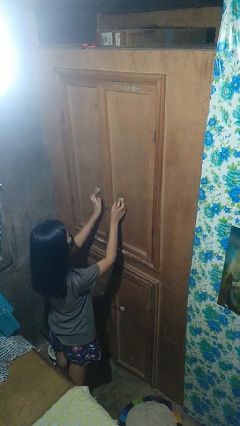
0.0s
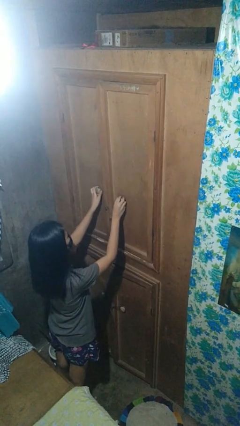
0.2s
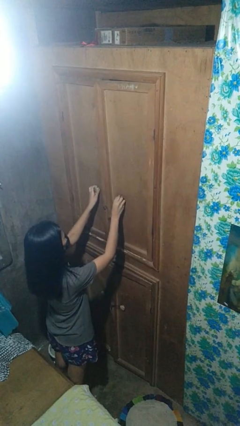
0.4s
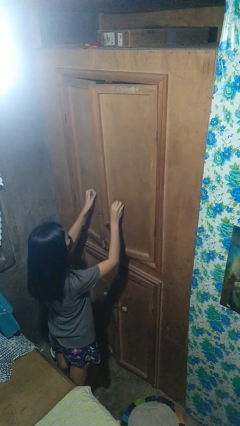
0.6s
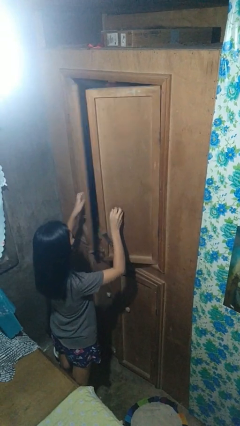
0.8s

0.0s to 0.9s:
person opens closet door

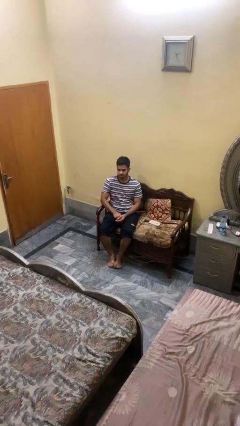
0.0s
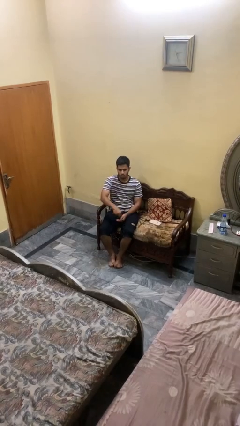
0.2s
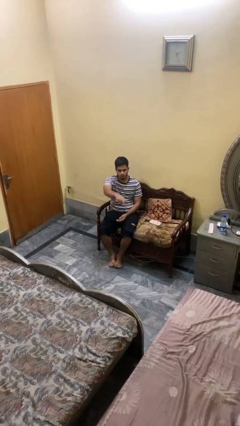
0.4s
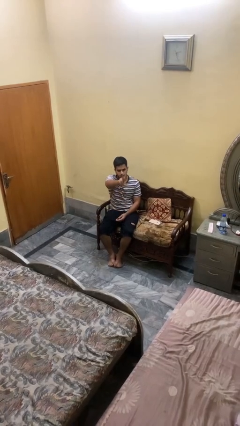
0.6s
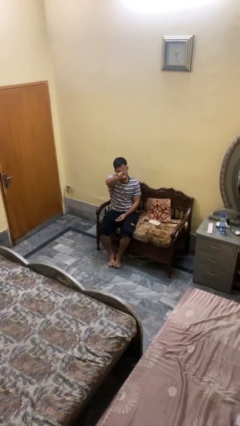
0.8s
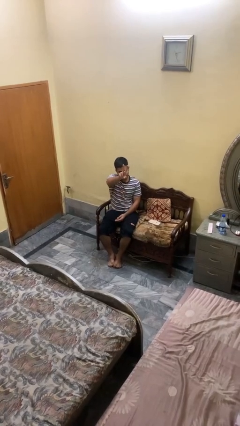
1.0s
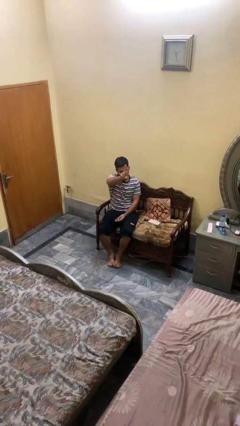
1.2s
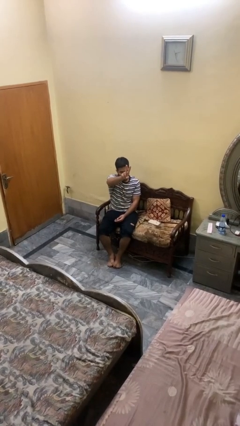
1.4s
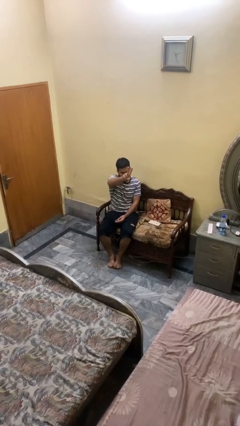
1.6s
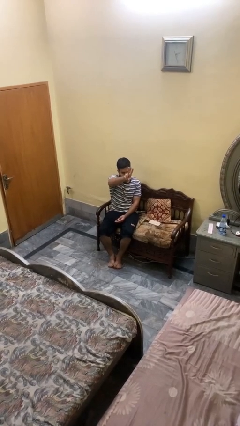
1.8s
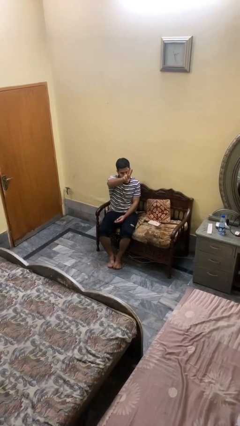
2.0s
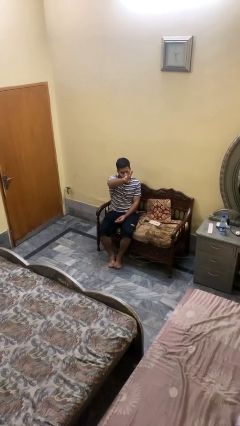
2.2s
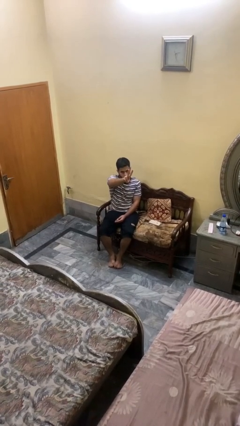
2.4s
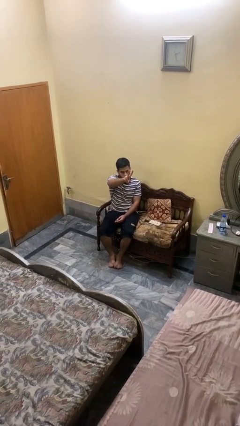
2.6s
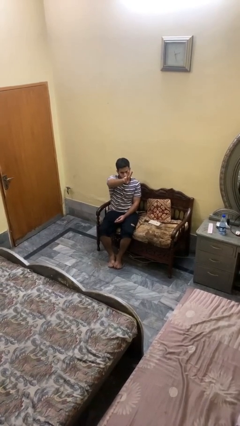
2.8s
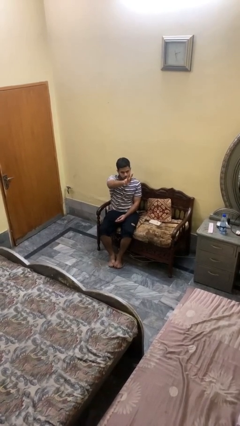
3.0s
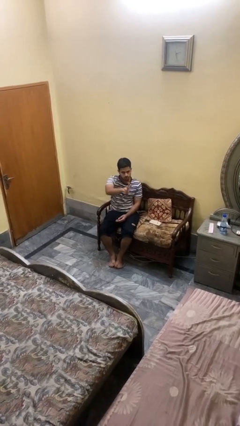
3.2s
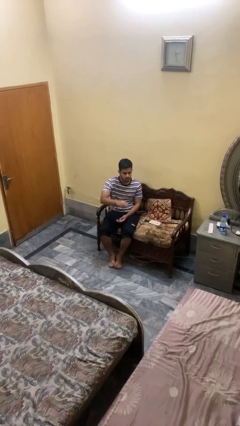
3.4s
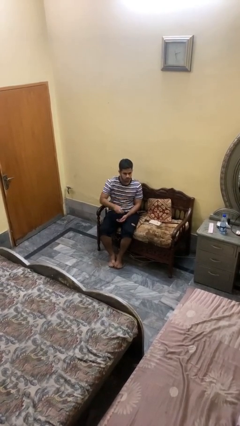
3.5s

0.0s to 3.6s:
person gestures peace

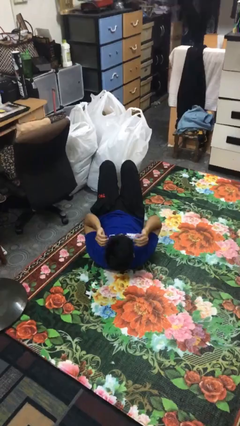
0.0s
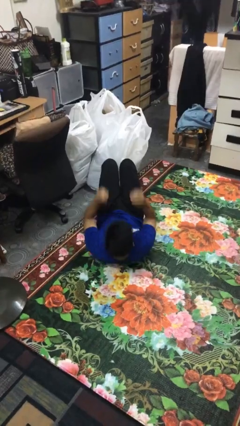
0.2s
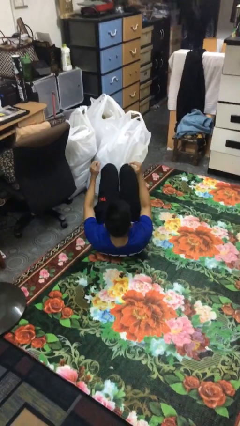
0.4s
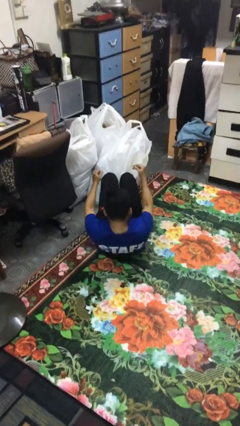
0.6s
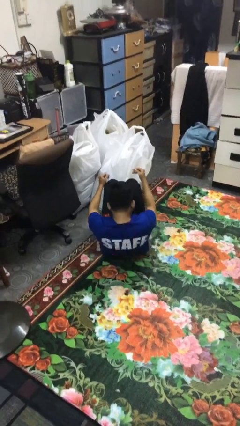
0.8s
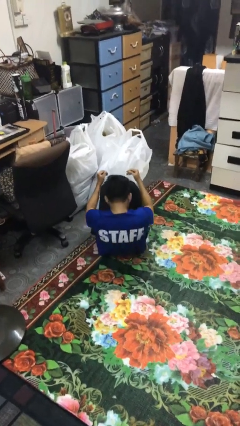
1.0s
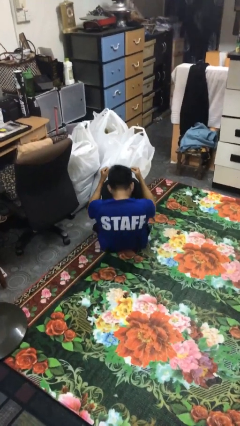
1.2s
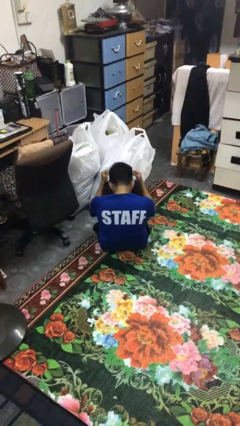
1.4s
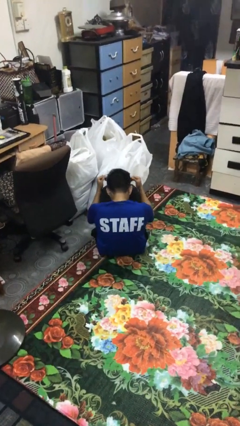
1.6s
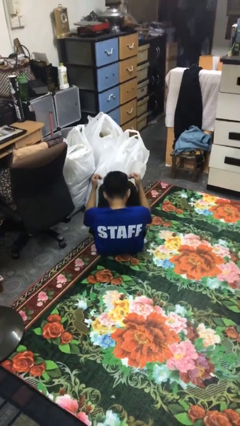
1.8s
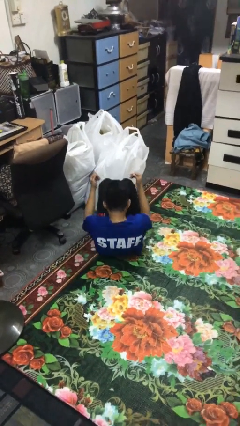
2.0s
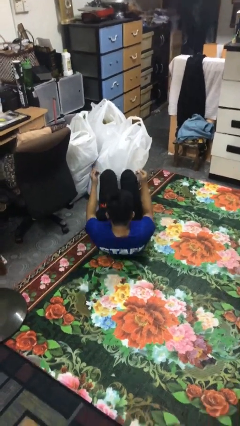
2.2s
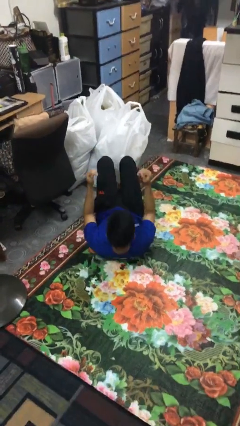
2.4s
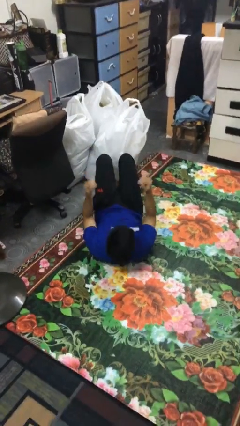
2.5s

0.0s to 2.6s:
person exercises with situp

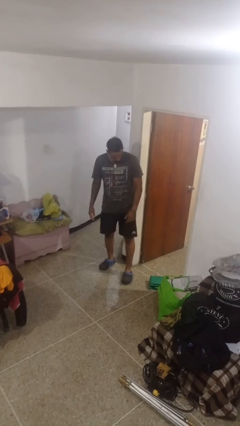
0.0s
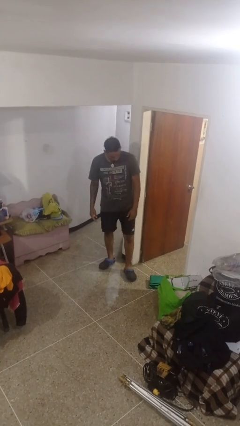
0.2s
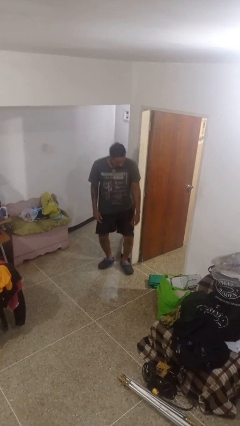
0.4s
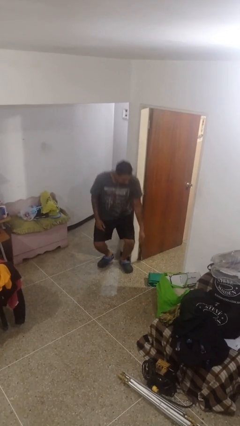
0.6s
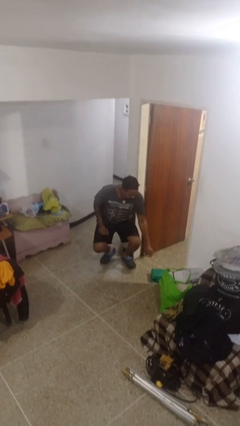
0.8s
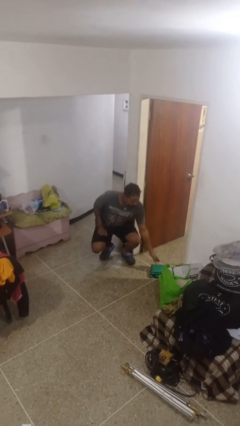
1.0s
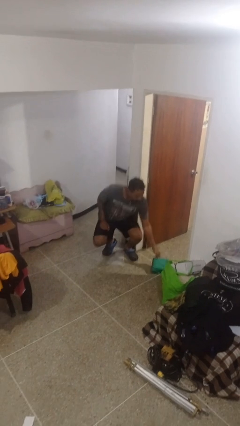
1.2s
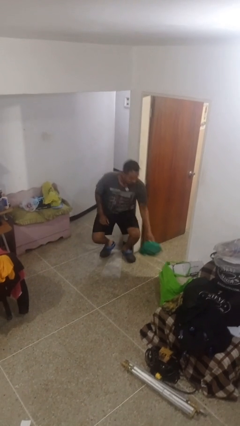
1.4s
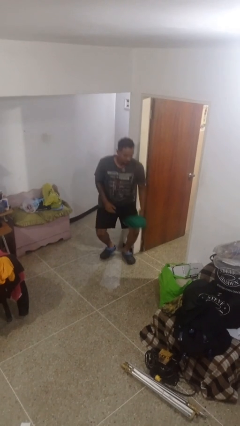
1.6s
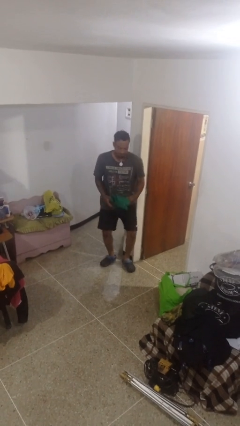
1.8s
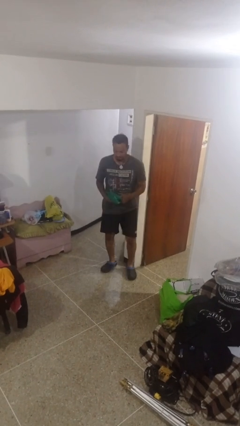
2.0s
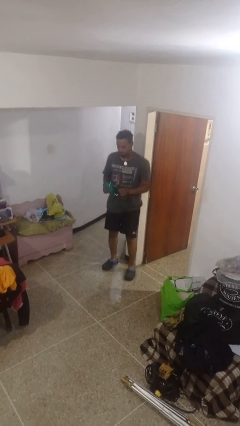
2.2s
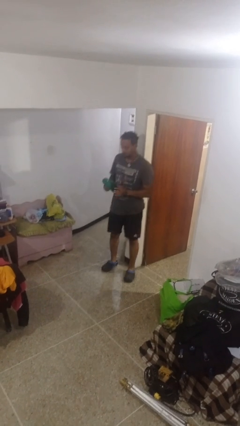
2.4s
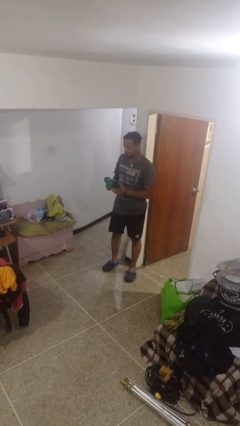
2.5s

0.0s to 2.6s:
person picks up object from floor

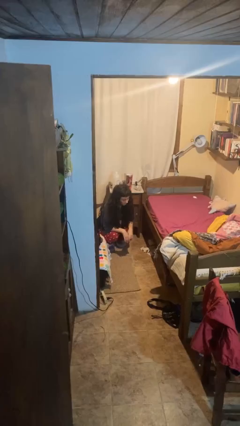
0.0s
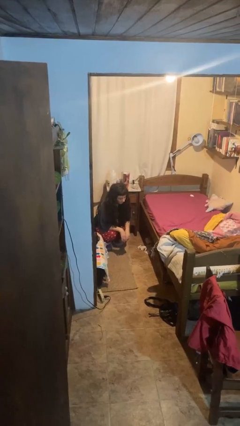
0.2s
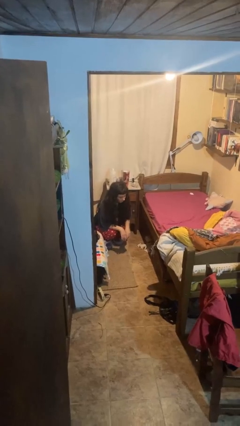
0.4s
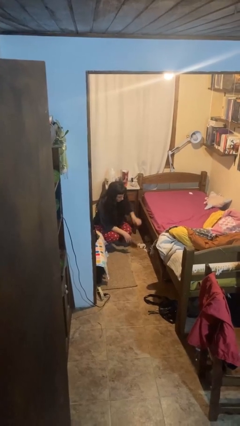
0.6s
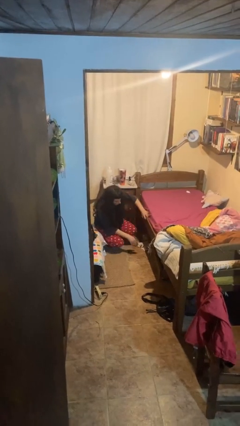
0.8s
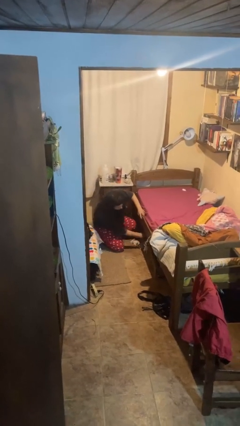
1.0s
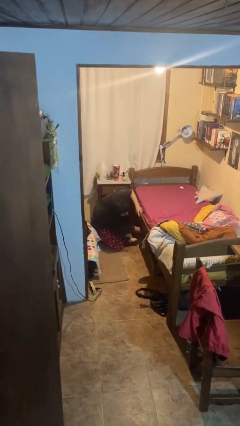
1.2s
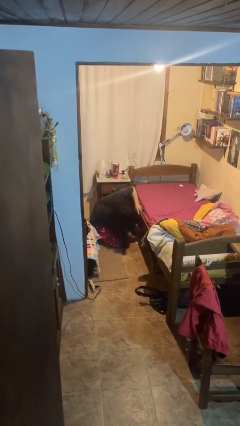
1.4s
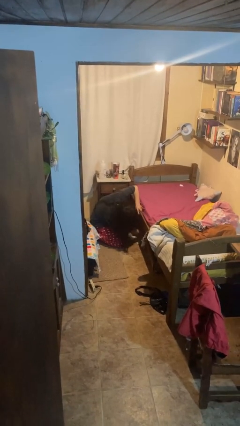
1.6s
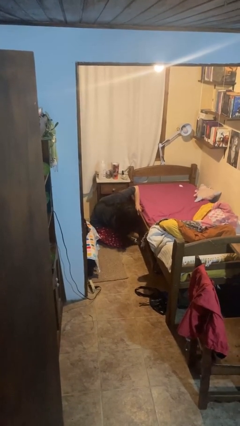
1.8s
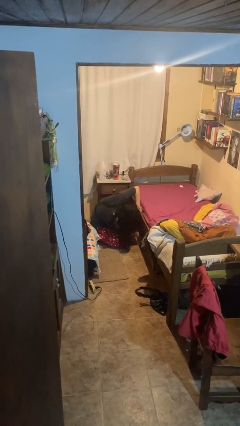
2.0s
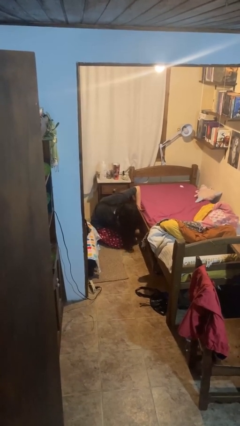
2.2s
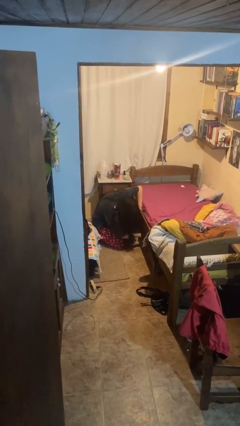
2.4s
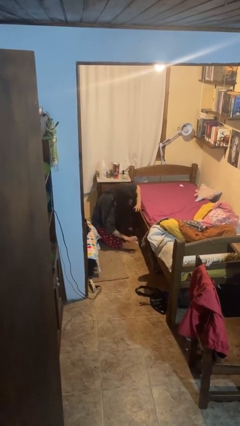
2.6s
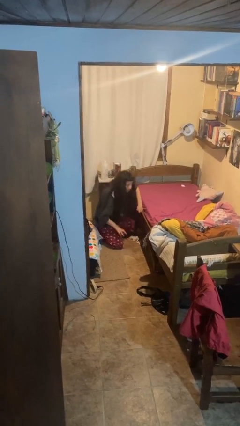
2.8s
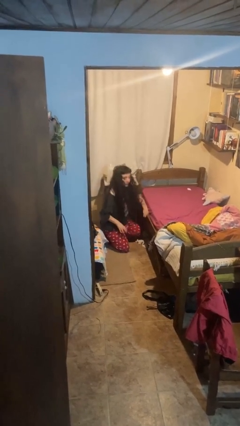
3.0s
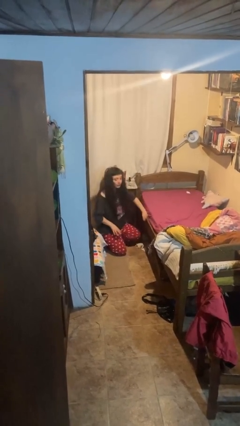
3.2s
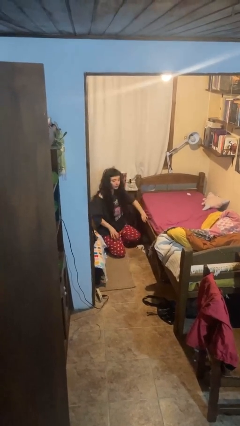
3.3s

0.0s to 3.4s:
person searches under bed

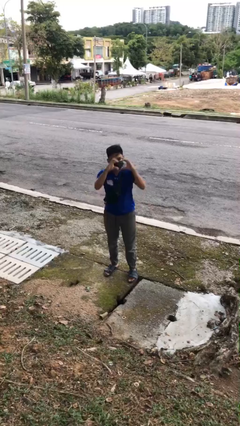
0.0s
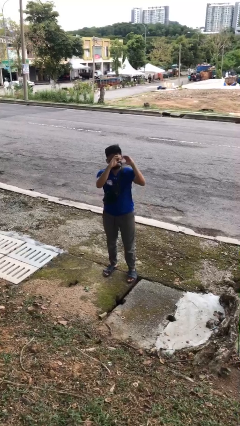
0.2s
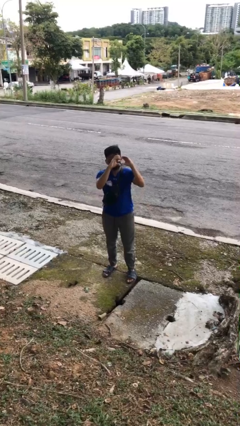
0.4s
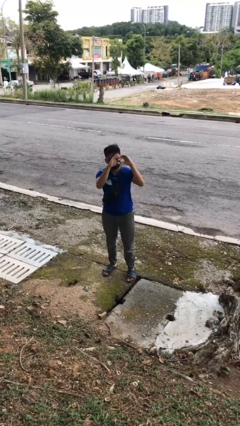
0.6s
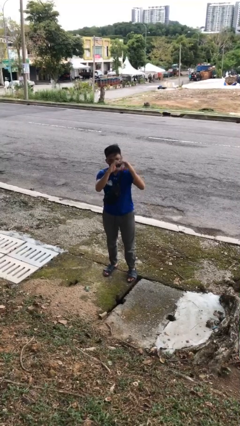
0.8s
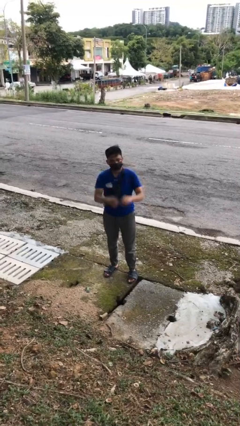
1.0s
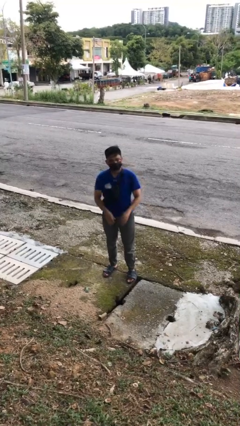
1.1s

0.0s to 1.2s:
person gestures heart

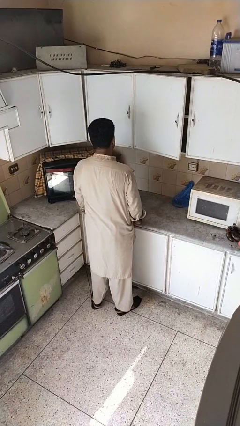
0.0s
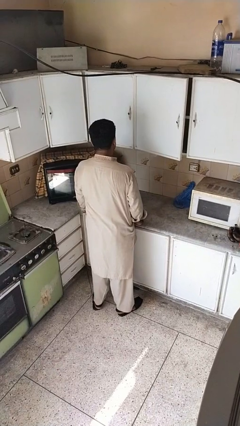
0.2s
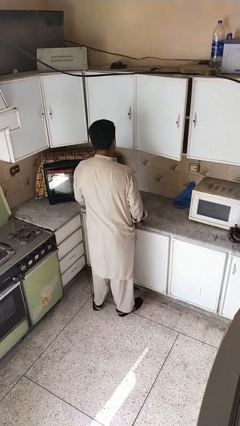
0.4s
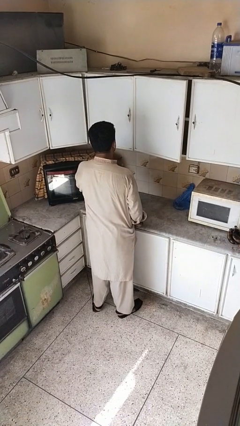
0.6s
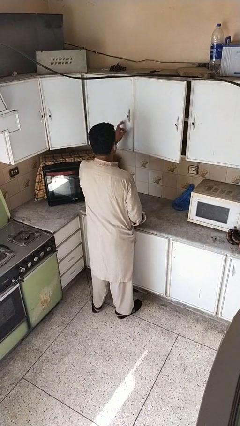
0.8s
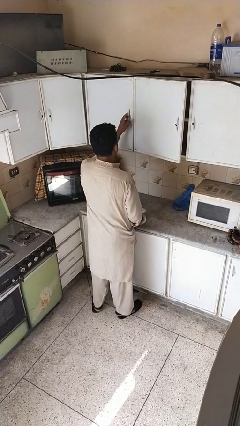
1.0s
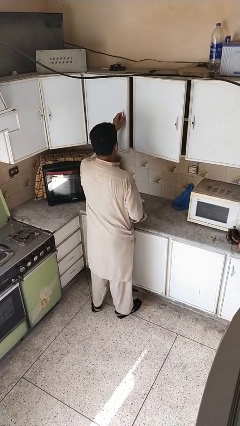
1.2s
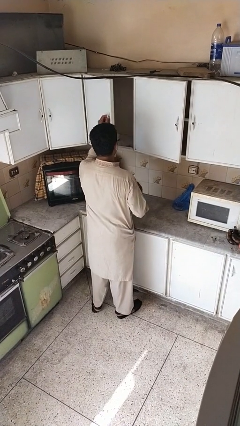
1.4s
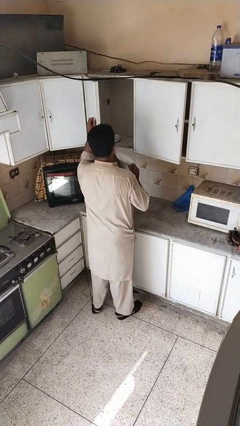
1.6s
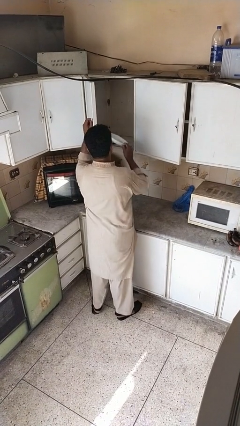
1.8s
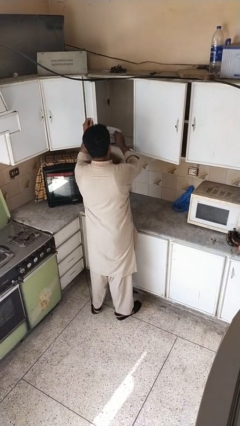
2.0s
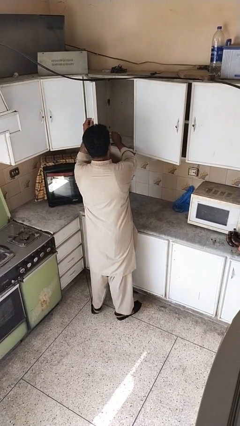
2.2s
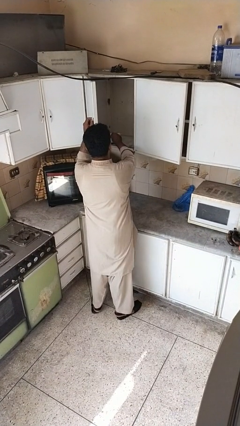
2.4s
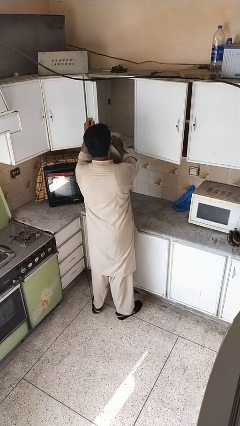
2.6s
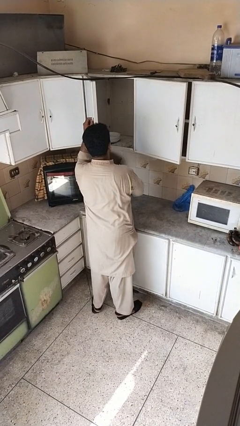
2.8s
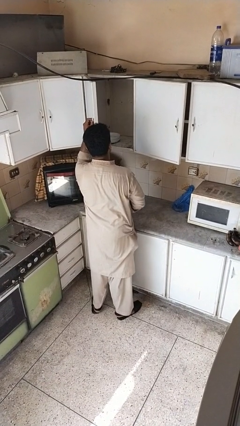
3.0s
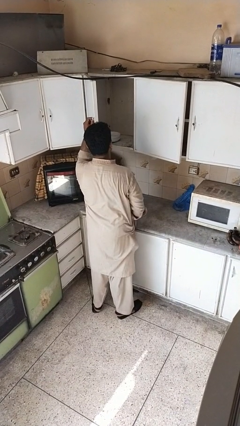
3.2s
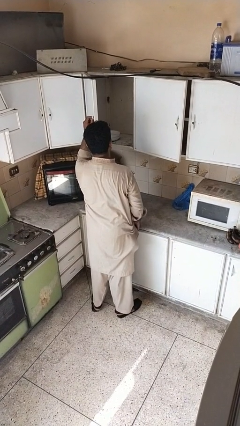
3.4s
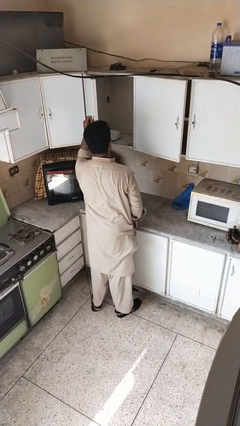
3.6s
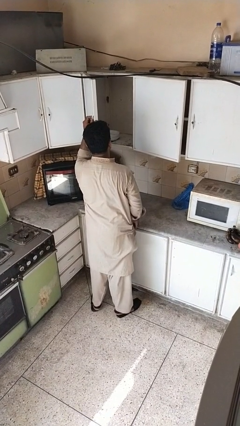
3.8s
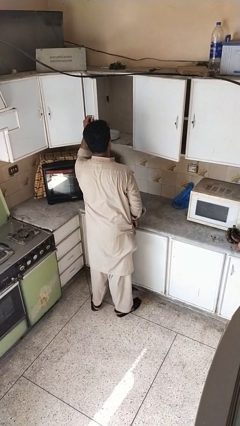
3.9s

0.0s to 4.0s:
person puts object in cabinet
